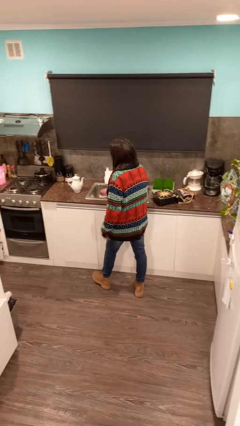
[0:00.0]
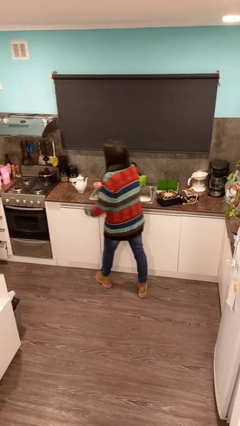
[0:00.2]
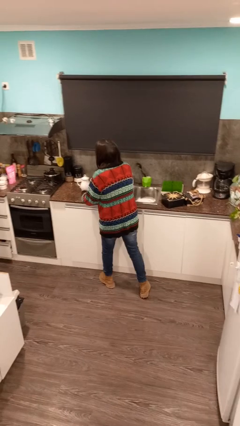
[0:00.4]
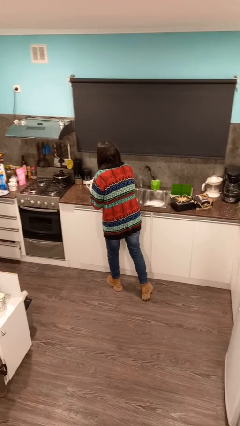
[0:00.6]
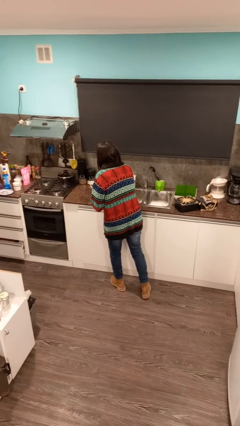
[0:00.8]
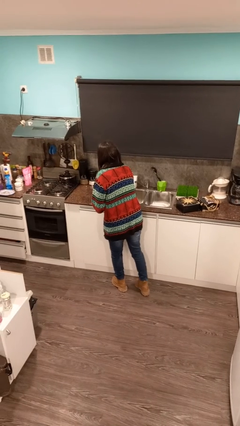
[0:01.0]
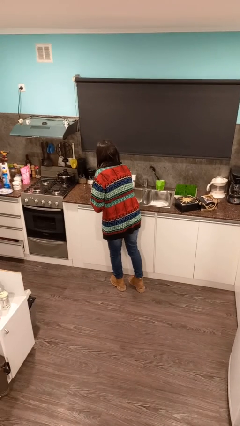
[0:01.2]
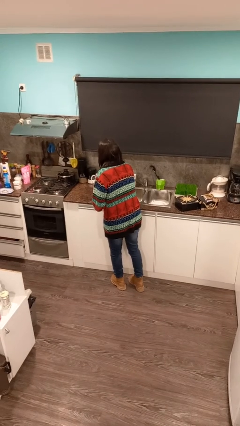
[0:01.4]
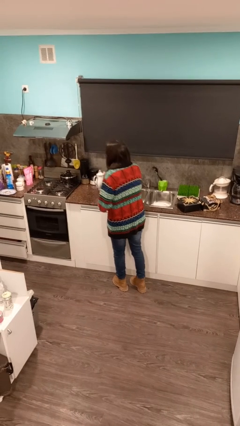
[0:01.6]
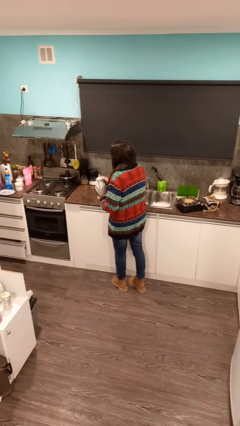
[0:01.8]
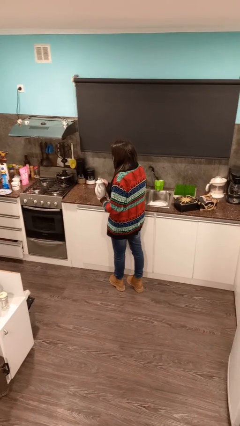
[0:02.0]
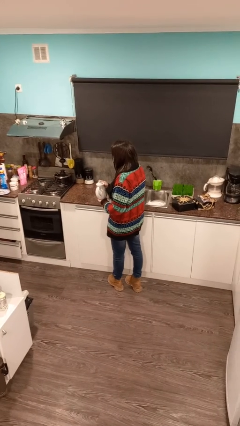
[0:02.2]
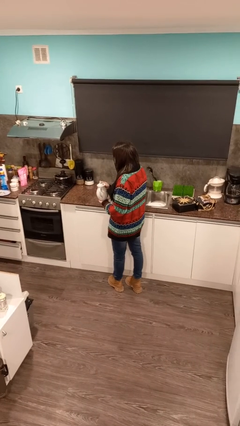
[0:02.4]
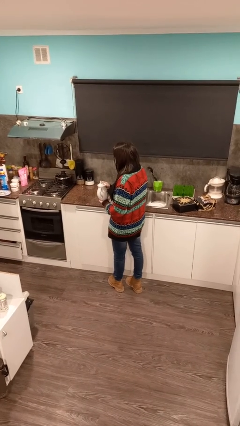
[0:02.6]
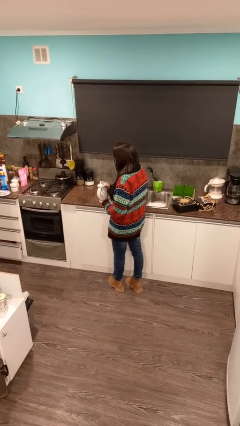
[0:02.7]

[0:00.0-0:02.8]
person picks up object from countertop

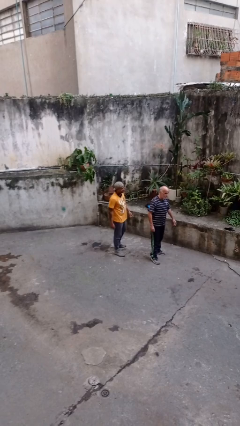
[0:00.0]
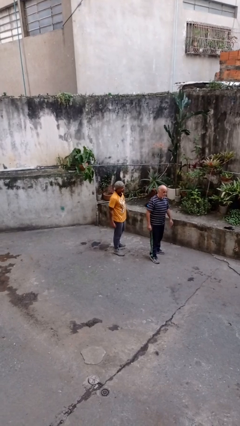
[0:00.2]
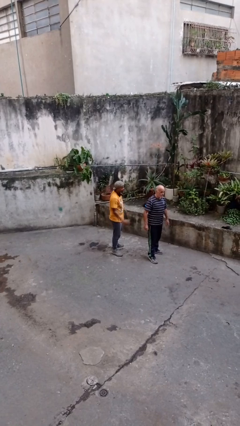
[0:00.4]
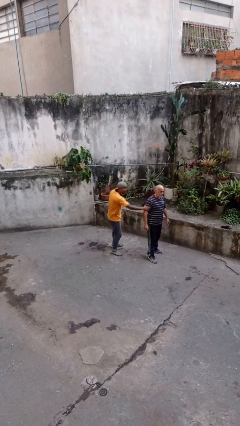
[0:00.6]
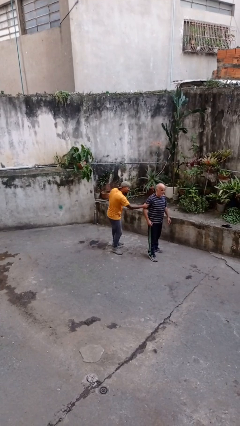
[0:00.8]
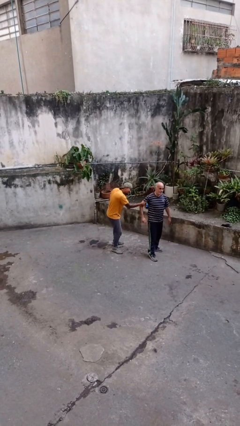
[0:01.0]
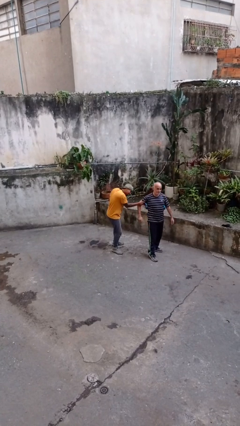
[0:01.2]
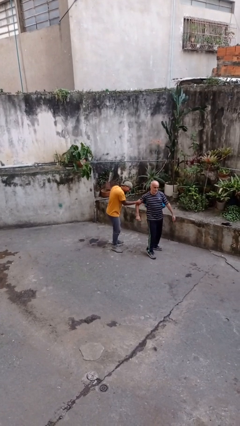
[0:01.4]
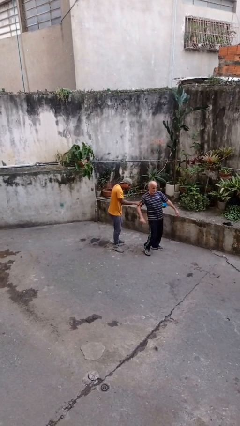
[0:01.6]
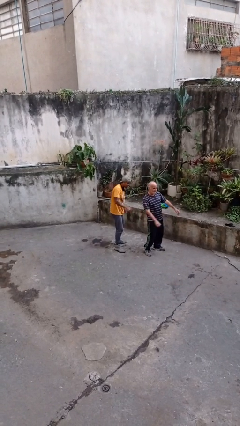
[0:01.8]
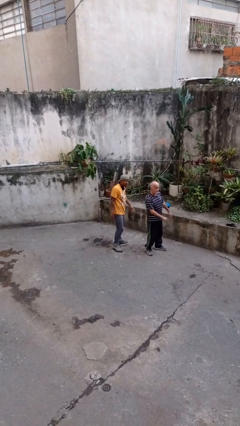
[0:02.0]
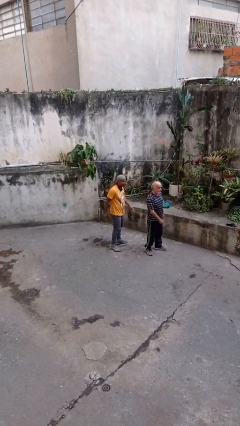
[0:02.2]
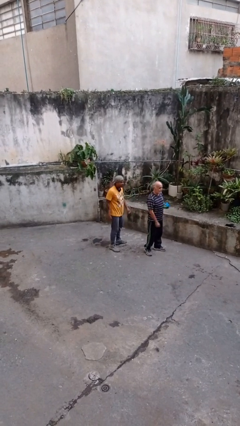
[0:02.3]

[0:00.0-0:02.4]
person grabs person by bicep

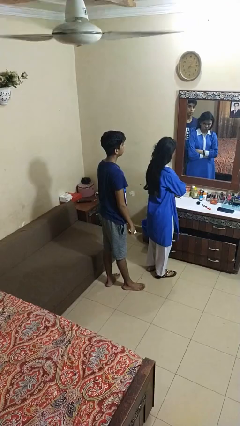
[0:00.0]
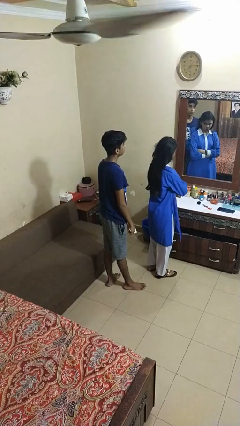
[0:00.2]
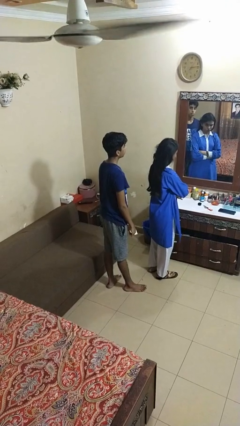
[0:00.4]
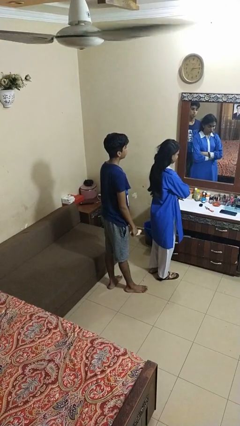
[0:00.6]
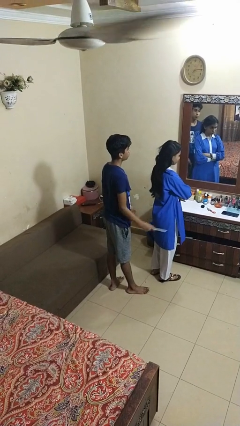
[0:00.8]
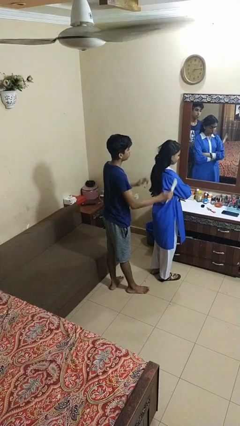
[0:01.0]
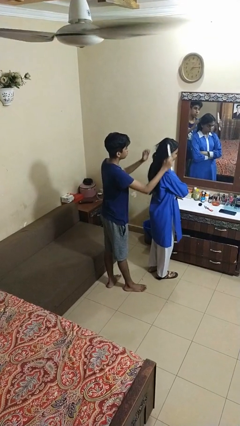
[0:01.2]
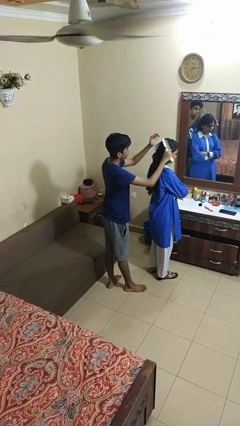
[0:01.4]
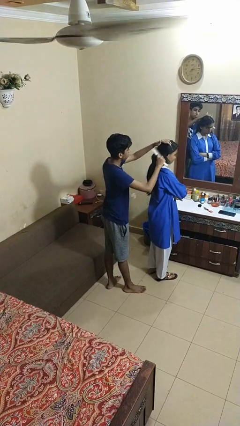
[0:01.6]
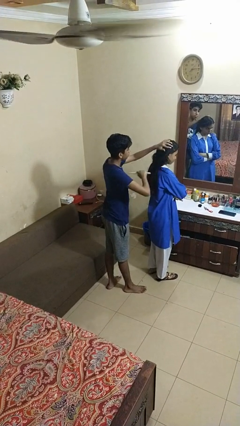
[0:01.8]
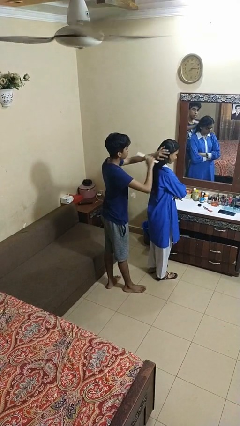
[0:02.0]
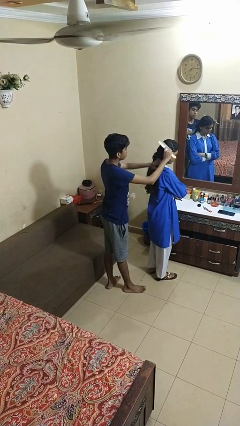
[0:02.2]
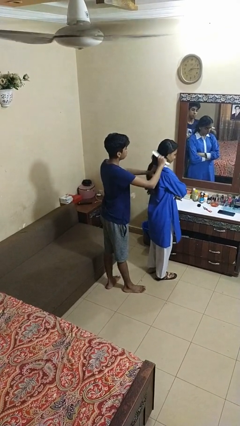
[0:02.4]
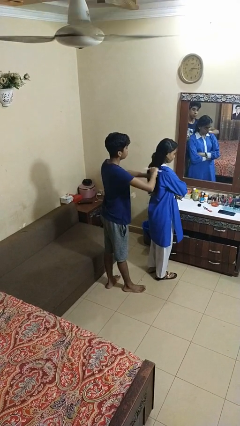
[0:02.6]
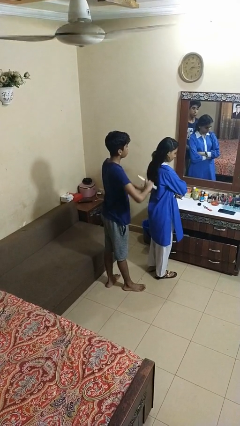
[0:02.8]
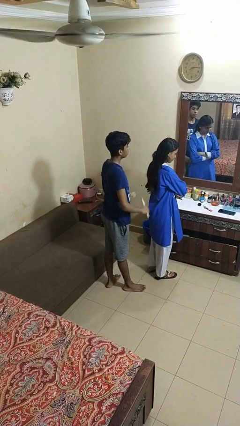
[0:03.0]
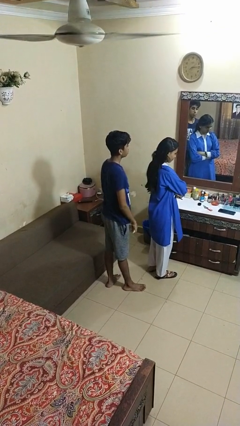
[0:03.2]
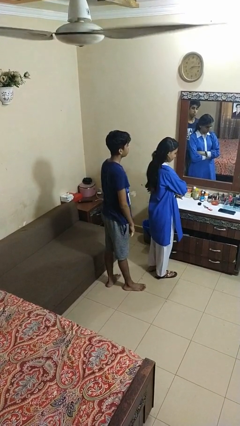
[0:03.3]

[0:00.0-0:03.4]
person brushes hair of person

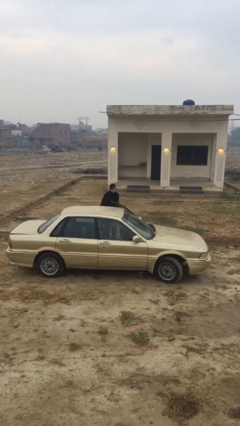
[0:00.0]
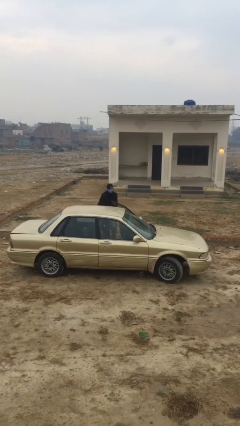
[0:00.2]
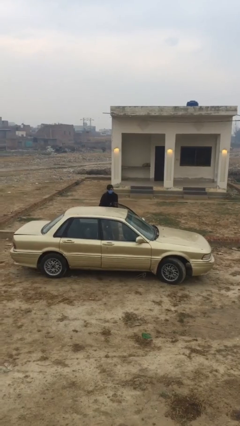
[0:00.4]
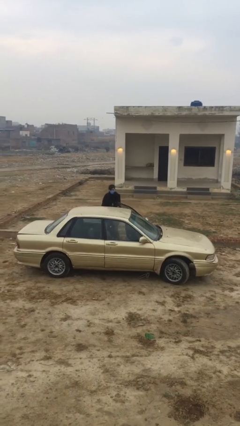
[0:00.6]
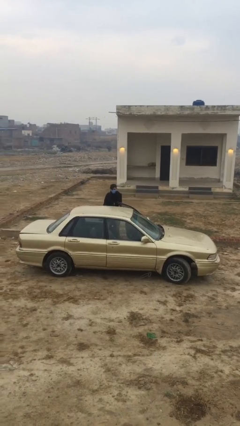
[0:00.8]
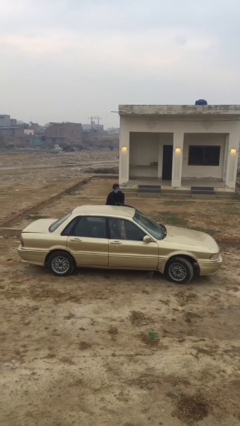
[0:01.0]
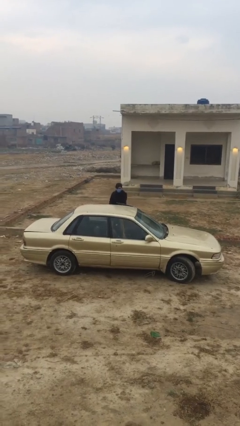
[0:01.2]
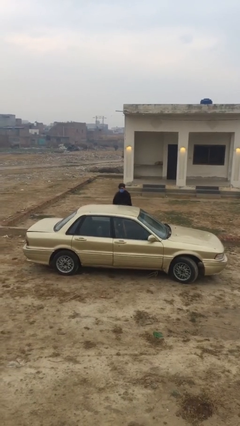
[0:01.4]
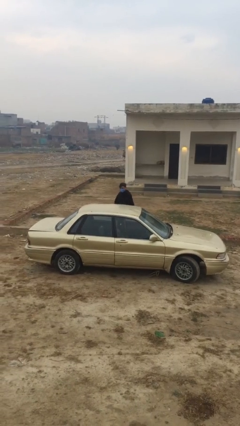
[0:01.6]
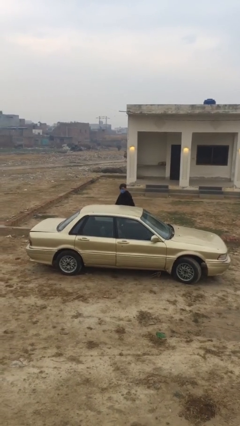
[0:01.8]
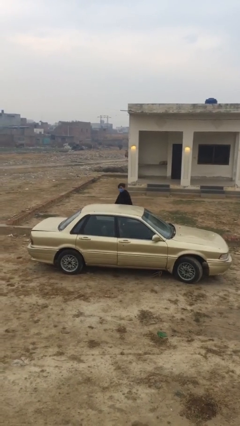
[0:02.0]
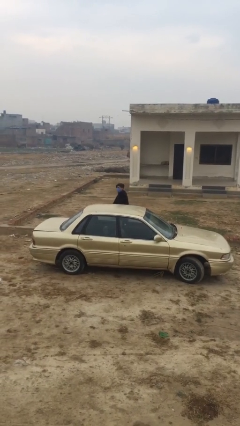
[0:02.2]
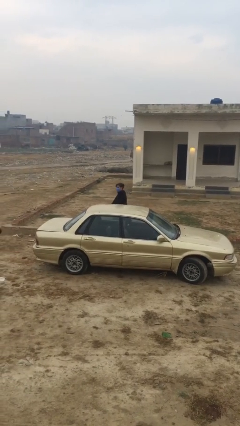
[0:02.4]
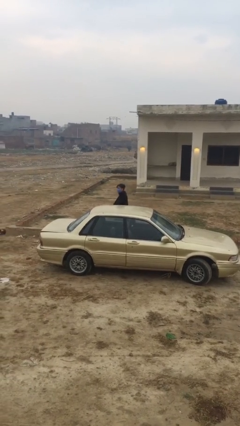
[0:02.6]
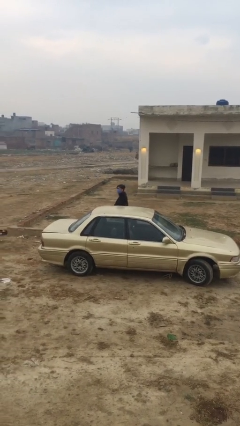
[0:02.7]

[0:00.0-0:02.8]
person closes car door

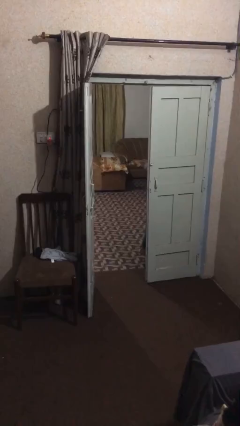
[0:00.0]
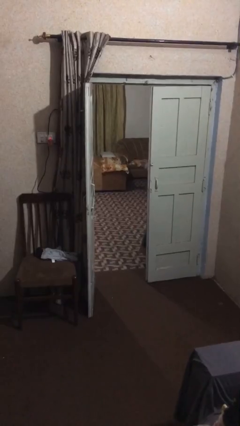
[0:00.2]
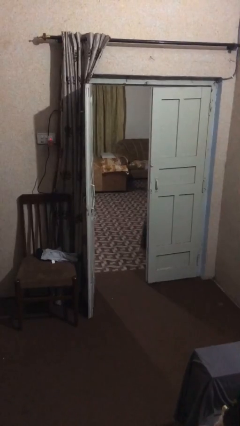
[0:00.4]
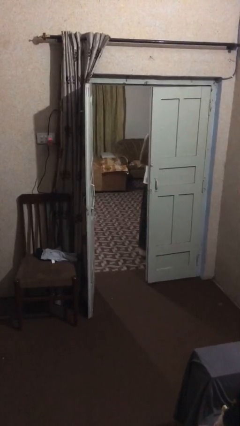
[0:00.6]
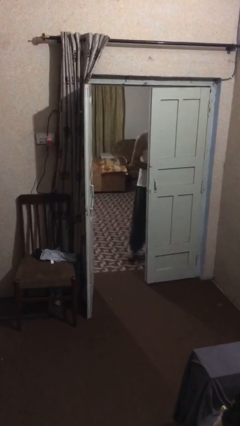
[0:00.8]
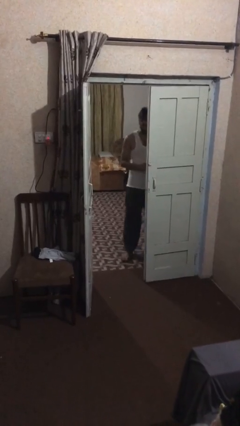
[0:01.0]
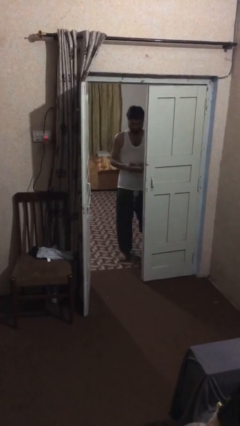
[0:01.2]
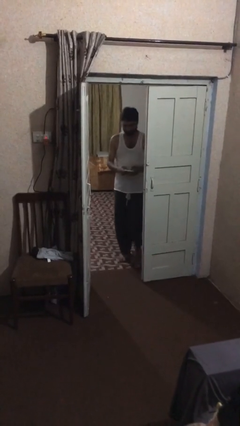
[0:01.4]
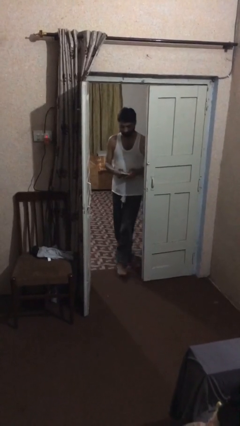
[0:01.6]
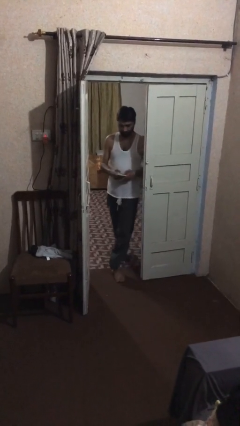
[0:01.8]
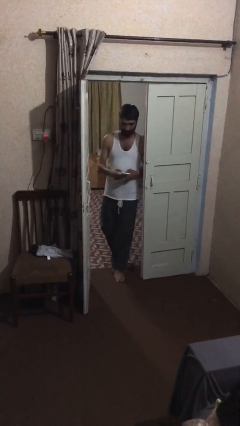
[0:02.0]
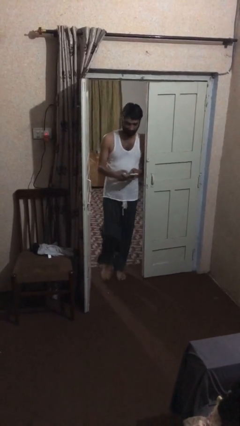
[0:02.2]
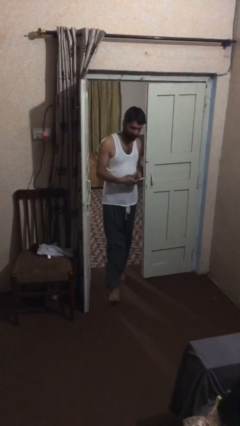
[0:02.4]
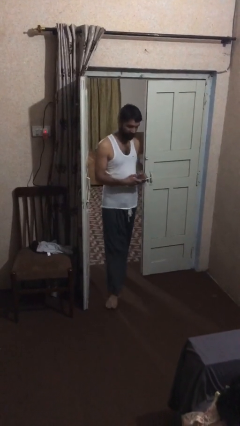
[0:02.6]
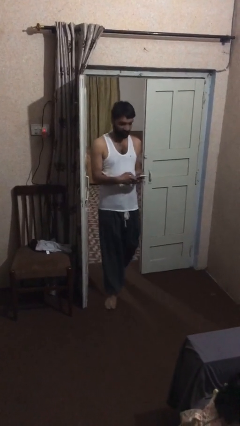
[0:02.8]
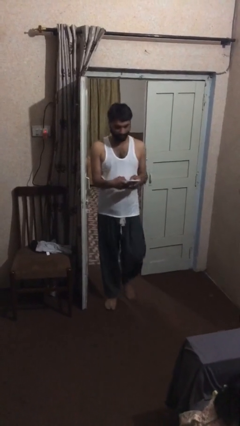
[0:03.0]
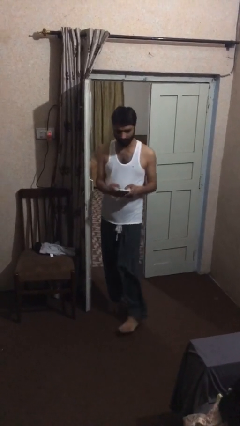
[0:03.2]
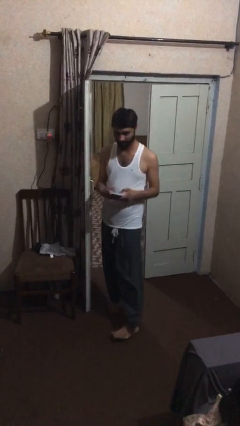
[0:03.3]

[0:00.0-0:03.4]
person enters scene through structure

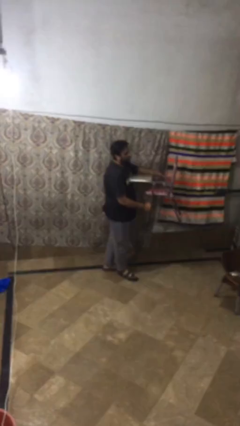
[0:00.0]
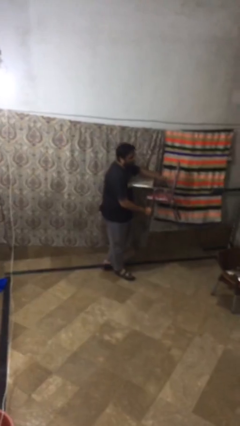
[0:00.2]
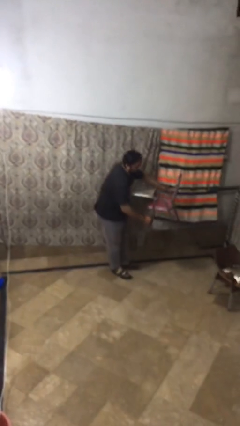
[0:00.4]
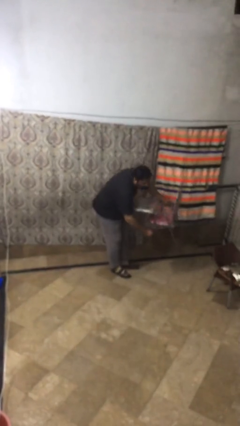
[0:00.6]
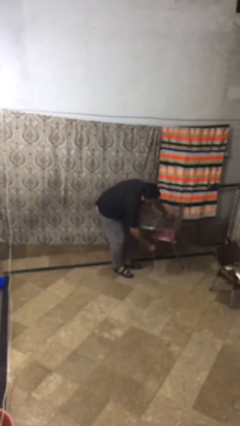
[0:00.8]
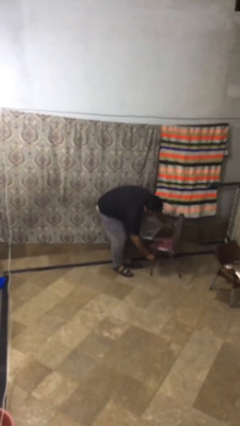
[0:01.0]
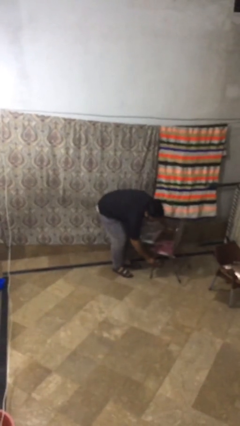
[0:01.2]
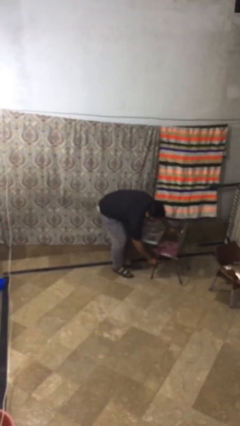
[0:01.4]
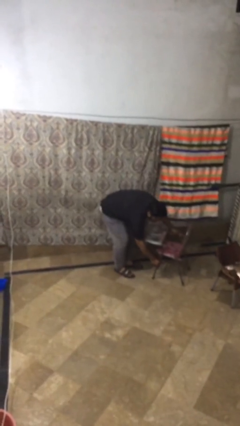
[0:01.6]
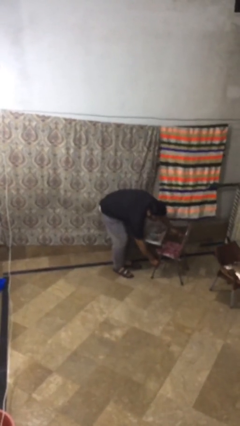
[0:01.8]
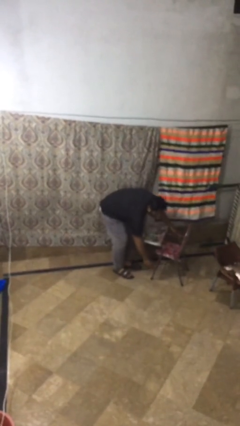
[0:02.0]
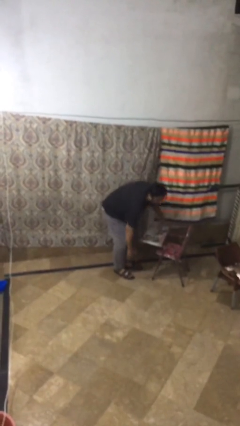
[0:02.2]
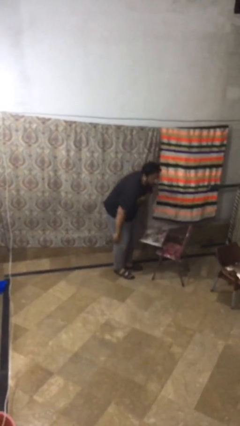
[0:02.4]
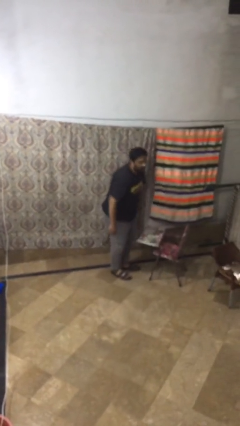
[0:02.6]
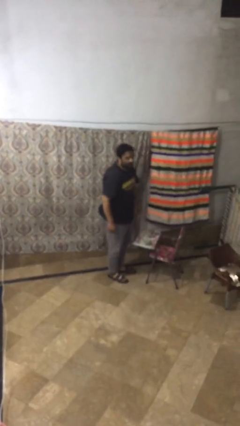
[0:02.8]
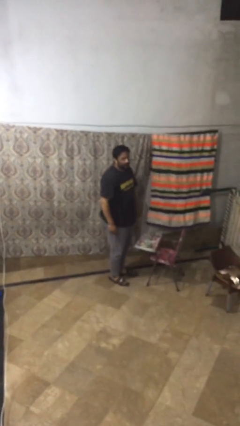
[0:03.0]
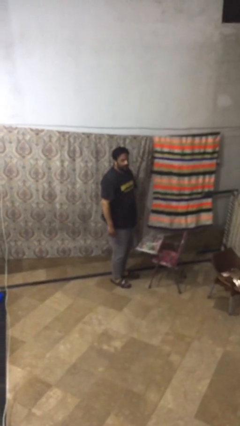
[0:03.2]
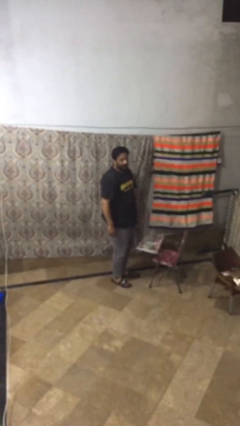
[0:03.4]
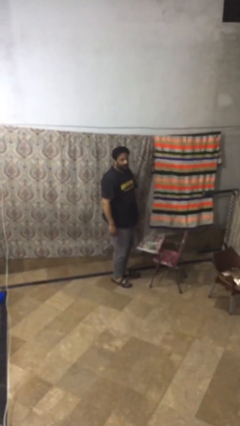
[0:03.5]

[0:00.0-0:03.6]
person puts down object on floor
